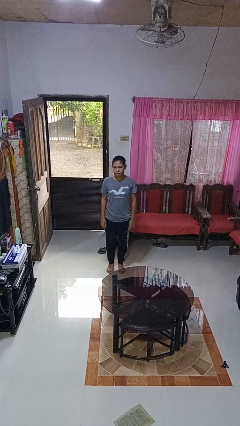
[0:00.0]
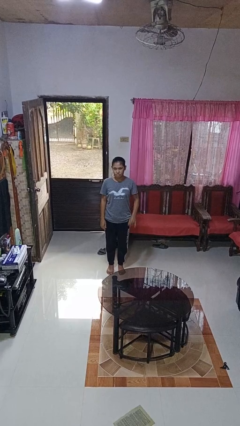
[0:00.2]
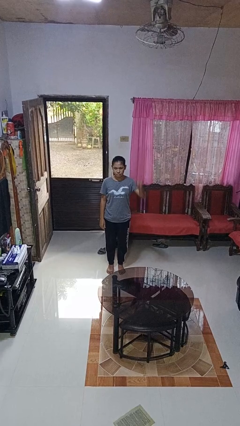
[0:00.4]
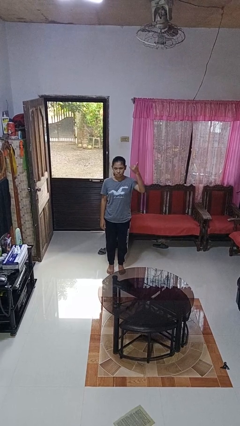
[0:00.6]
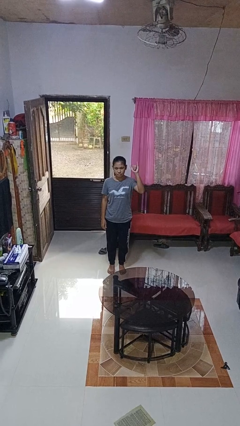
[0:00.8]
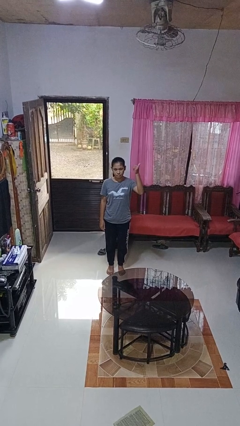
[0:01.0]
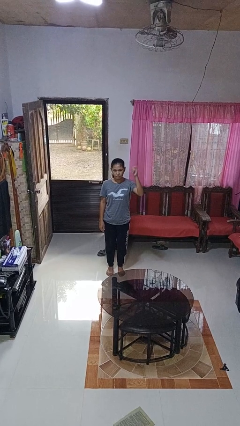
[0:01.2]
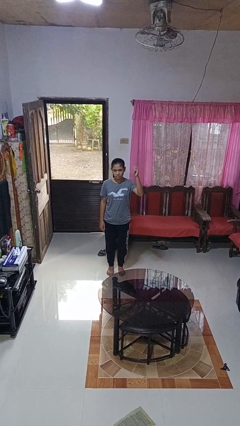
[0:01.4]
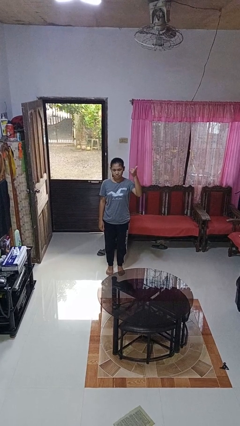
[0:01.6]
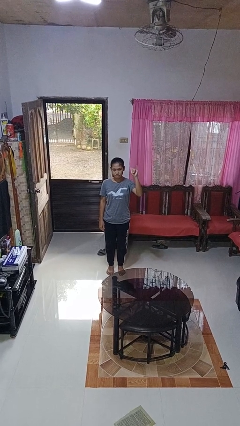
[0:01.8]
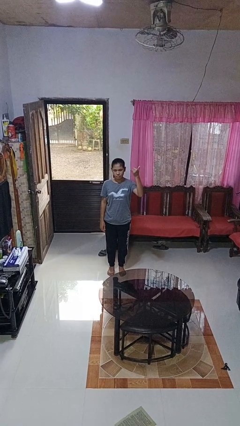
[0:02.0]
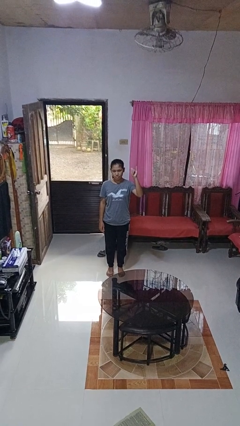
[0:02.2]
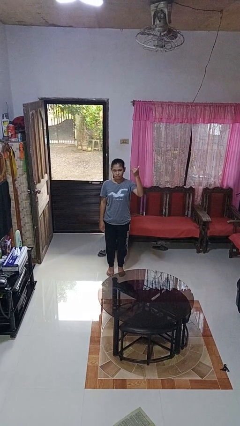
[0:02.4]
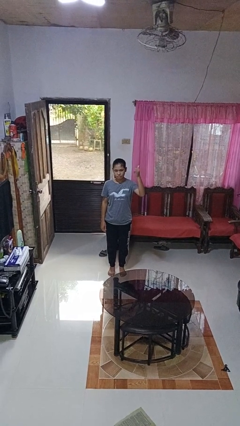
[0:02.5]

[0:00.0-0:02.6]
person gestures hang loose

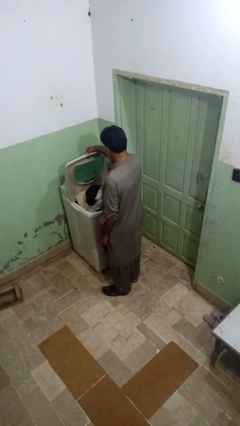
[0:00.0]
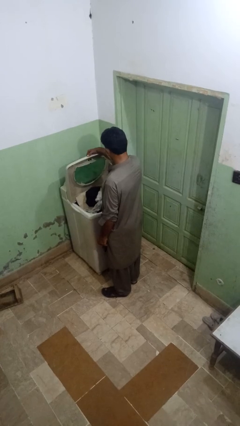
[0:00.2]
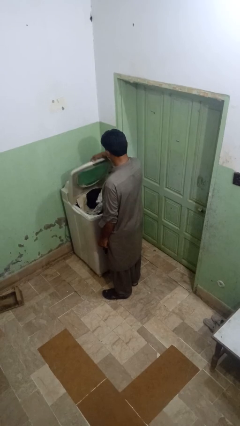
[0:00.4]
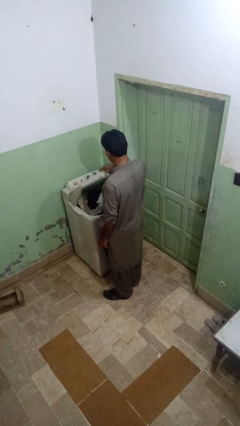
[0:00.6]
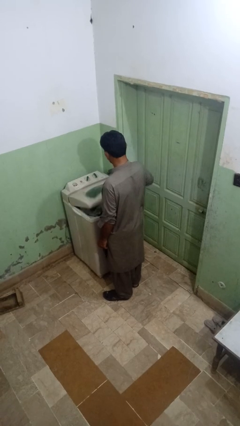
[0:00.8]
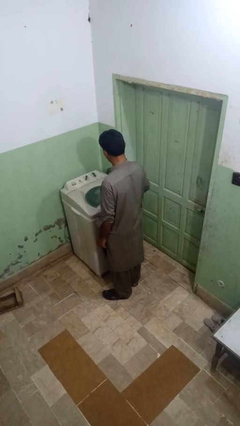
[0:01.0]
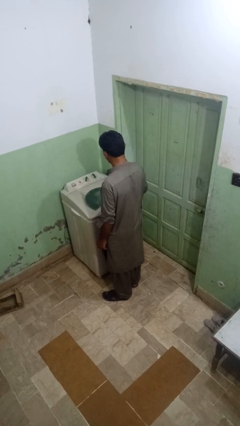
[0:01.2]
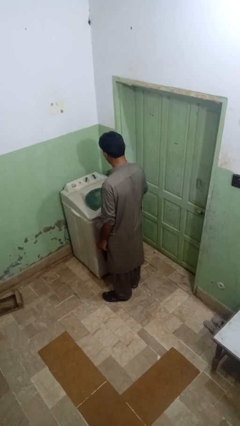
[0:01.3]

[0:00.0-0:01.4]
person closes clothes washer

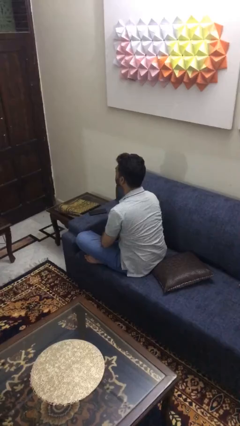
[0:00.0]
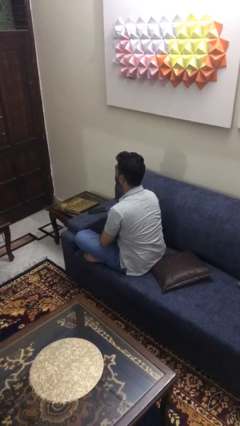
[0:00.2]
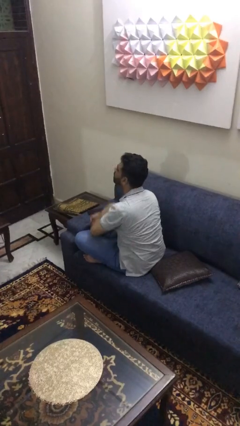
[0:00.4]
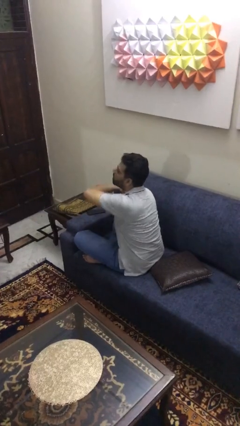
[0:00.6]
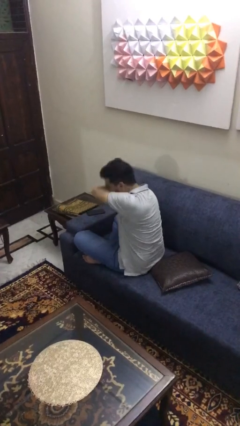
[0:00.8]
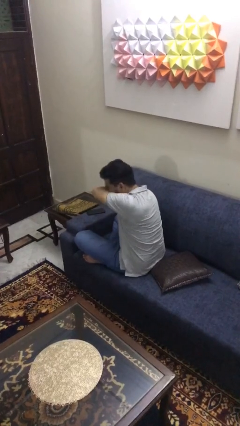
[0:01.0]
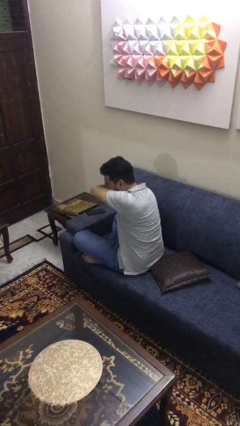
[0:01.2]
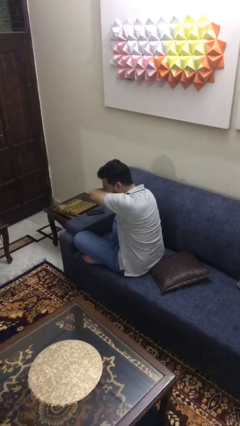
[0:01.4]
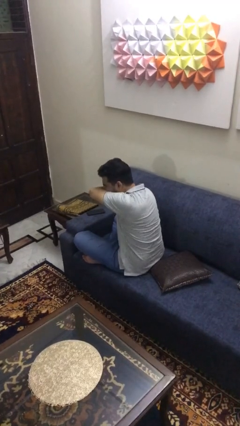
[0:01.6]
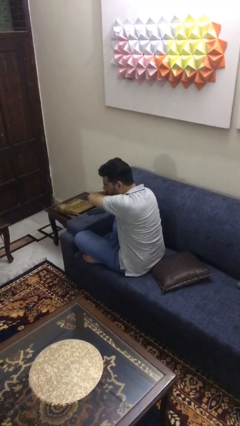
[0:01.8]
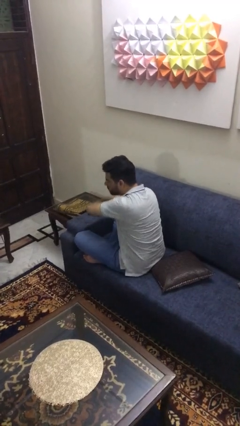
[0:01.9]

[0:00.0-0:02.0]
person sneezes into arm

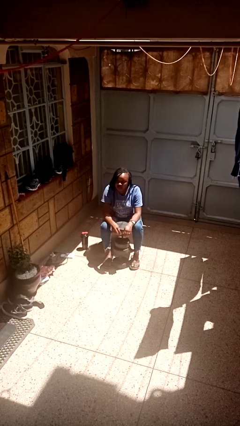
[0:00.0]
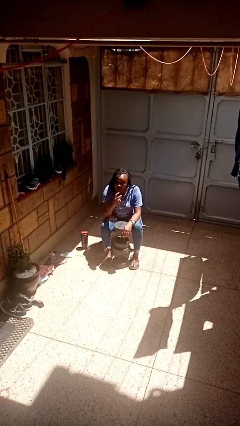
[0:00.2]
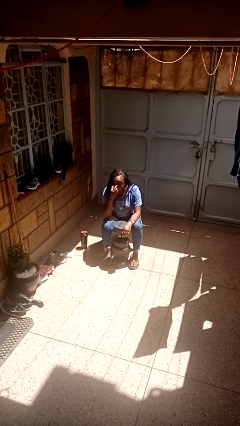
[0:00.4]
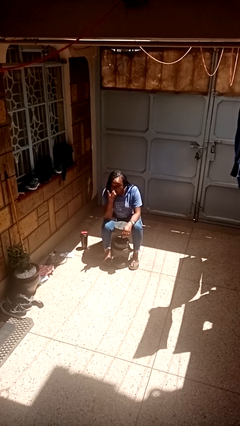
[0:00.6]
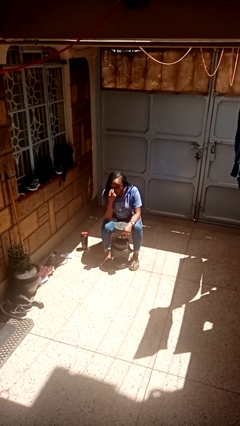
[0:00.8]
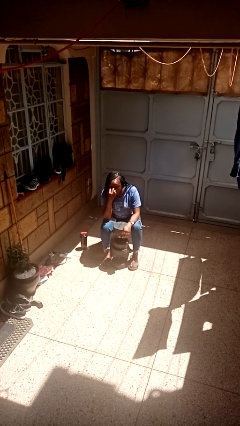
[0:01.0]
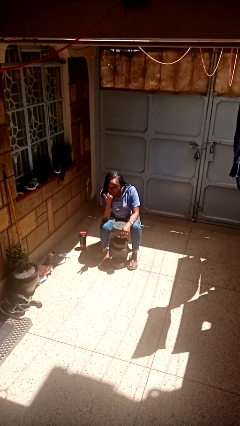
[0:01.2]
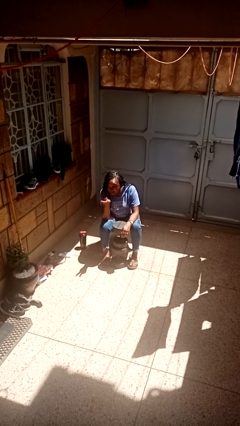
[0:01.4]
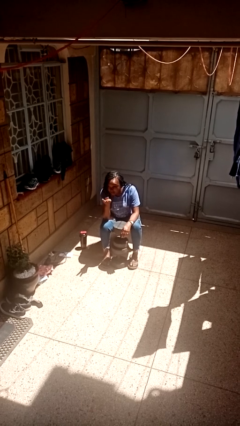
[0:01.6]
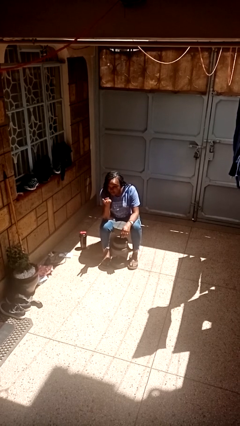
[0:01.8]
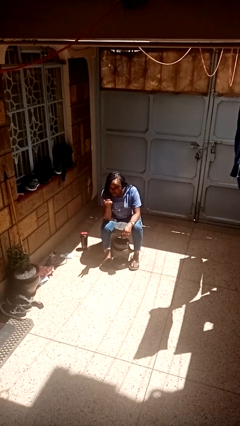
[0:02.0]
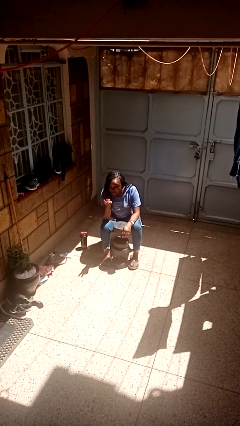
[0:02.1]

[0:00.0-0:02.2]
person gestures watch closely

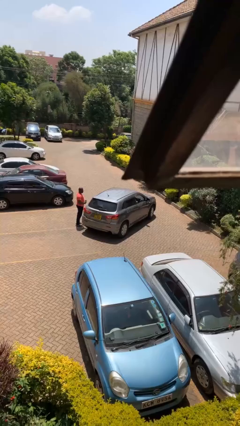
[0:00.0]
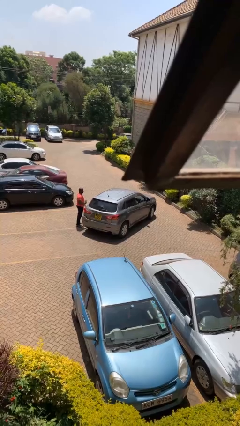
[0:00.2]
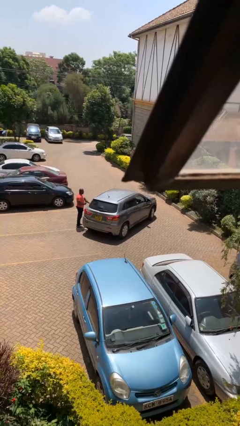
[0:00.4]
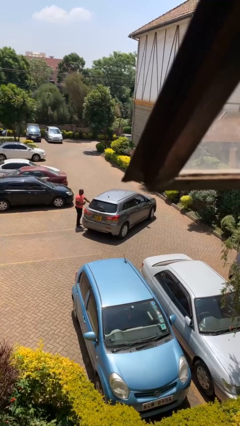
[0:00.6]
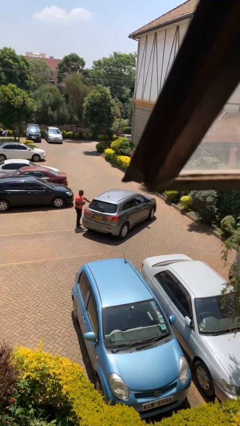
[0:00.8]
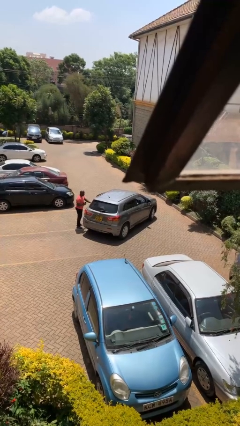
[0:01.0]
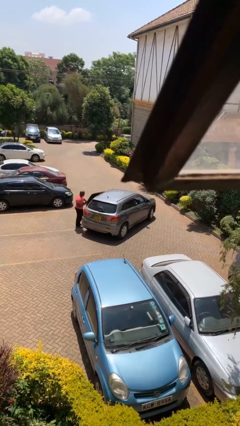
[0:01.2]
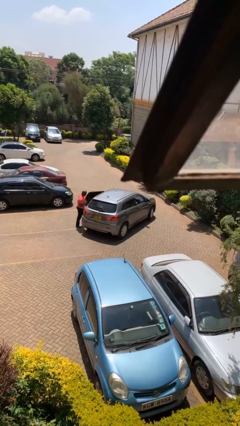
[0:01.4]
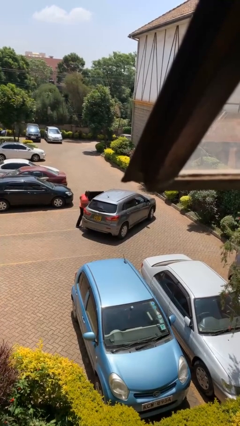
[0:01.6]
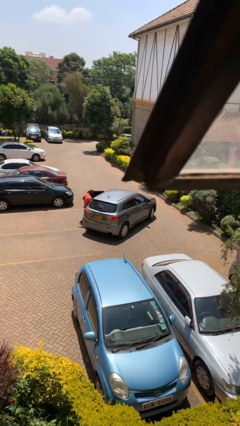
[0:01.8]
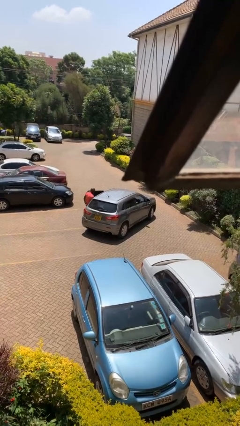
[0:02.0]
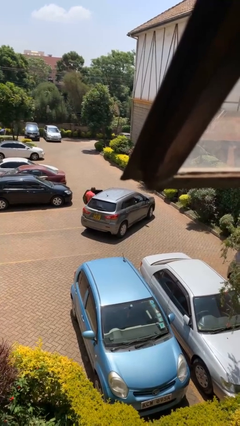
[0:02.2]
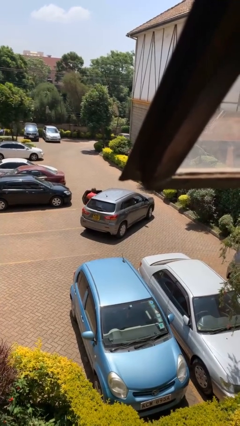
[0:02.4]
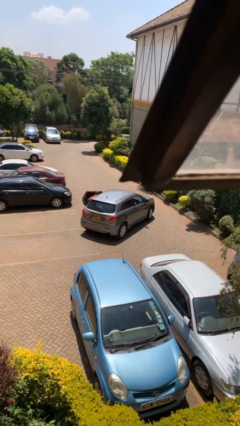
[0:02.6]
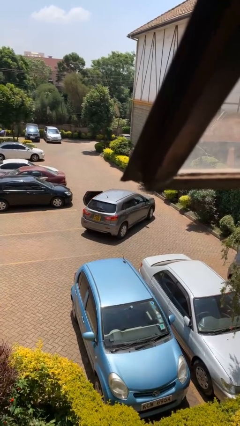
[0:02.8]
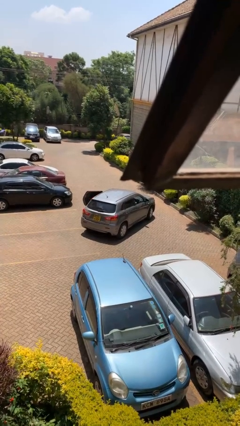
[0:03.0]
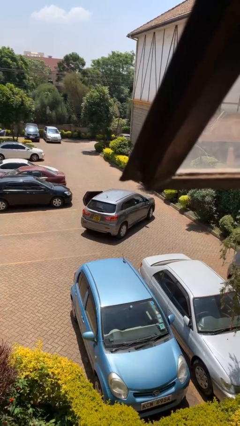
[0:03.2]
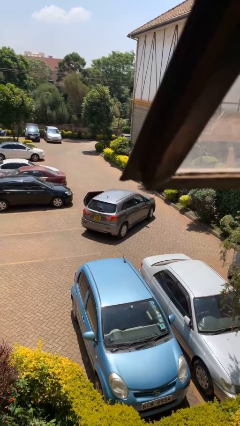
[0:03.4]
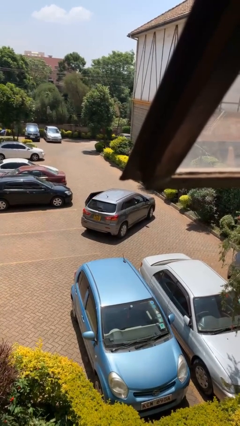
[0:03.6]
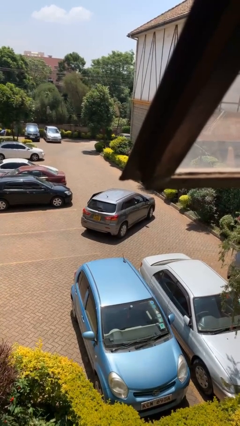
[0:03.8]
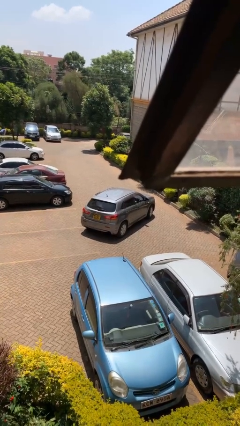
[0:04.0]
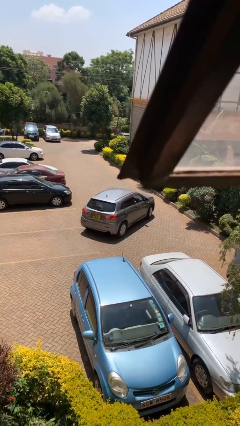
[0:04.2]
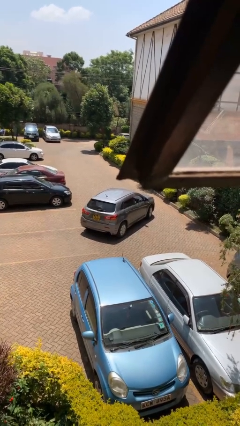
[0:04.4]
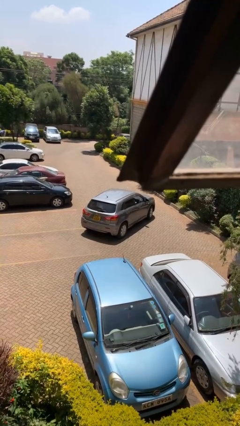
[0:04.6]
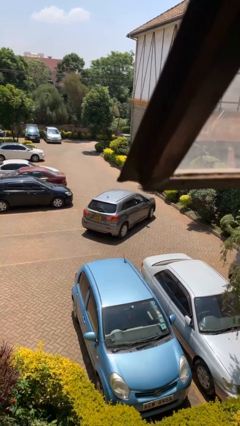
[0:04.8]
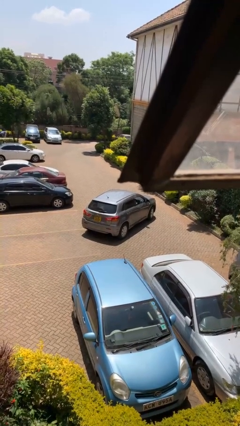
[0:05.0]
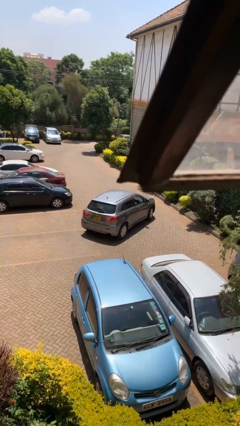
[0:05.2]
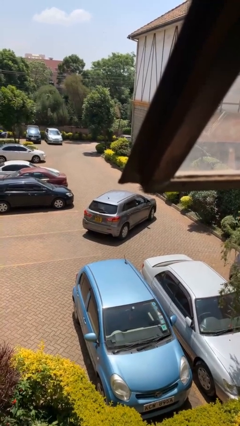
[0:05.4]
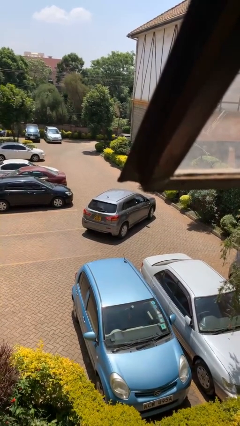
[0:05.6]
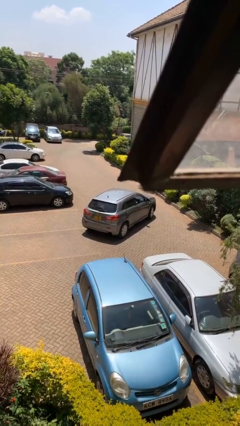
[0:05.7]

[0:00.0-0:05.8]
car picks up person

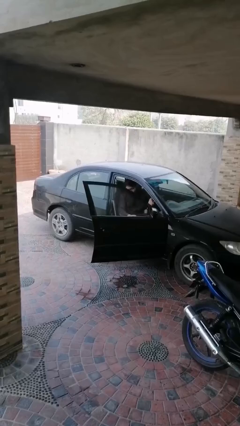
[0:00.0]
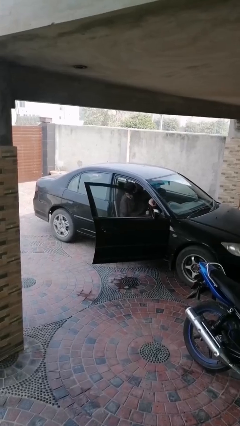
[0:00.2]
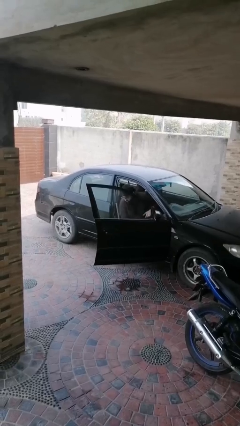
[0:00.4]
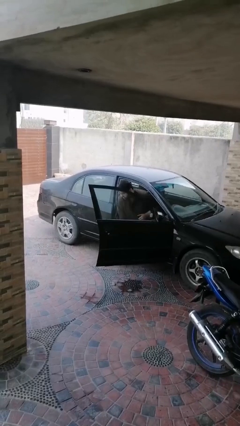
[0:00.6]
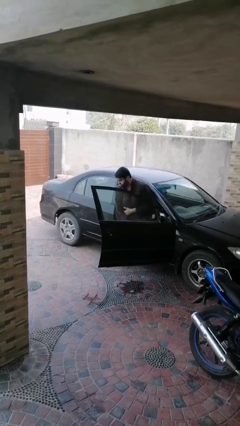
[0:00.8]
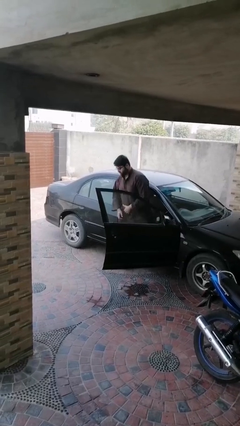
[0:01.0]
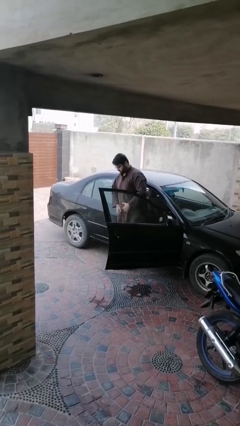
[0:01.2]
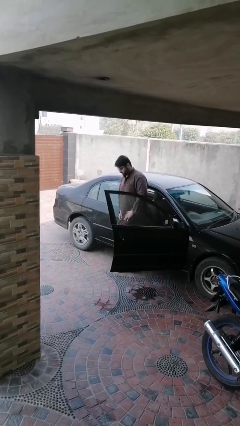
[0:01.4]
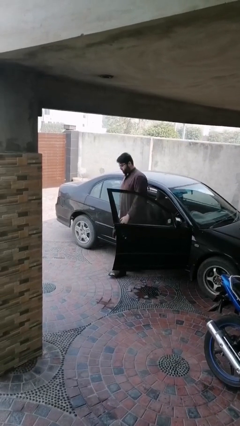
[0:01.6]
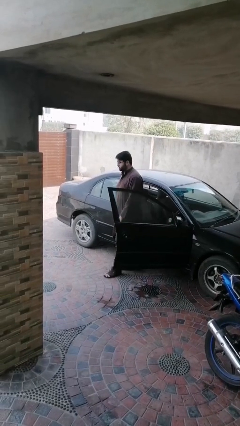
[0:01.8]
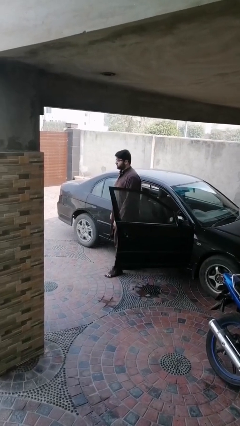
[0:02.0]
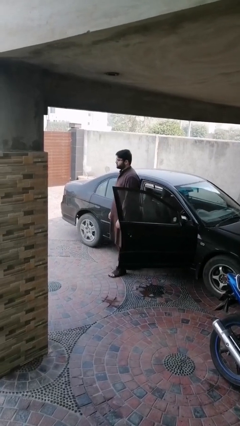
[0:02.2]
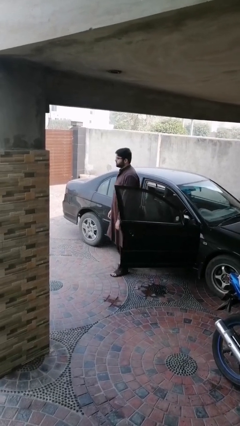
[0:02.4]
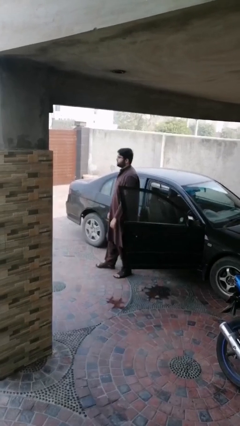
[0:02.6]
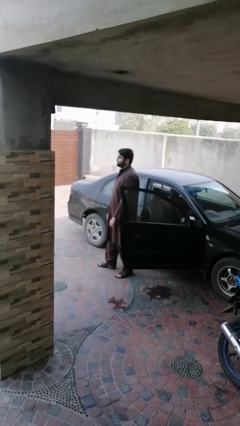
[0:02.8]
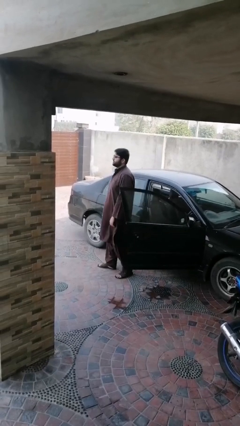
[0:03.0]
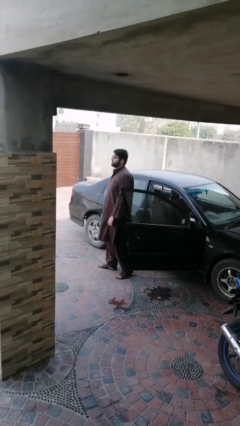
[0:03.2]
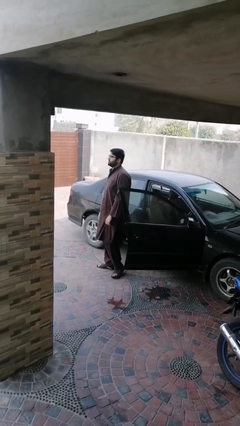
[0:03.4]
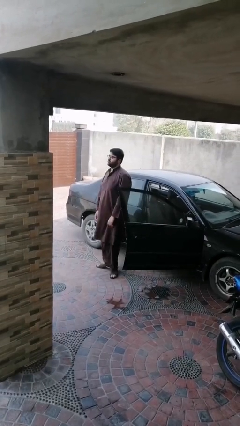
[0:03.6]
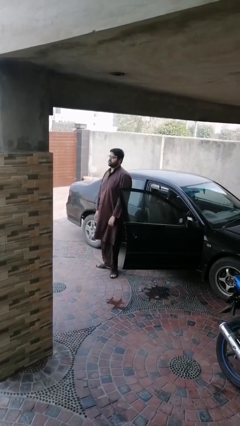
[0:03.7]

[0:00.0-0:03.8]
person exits car
